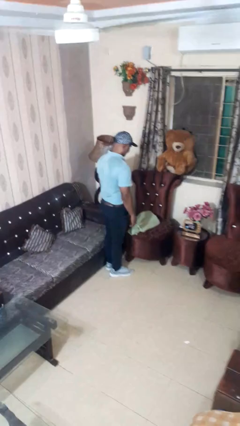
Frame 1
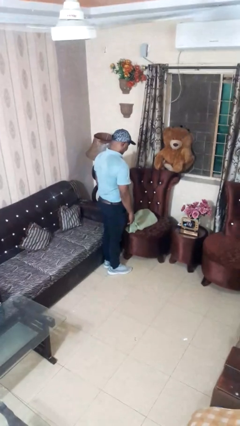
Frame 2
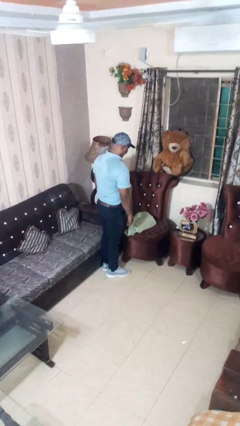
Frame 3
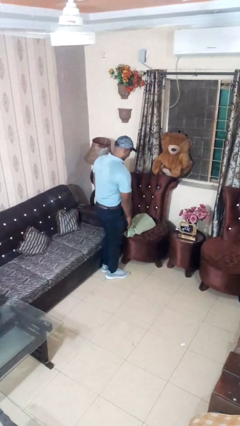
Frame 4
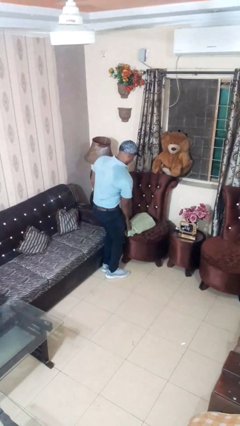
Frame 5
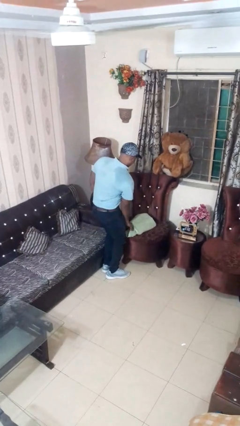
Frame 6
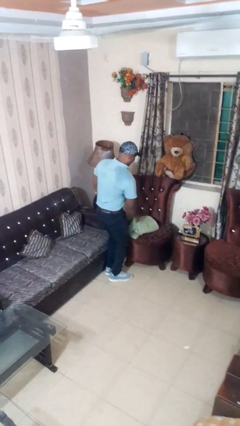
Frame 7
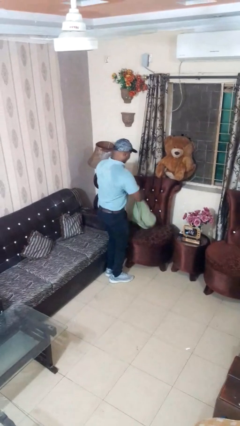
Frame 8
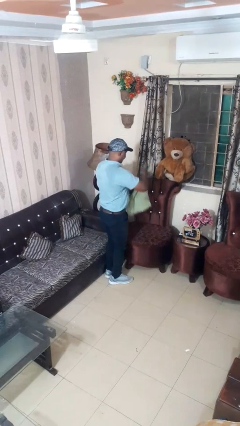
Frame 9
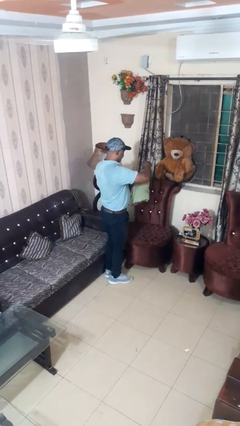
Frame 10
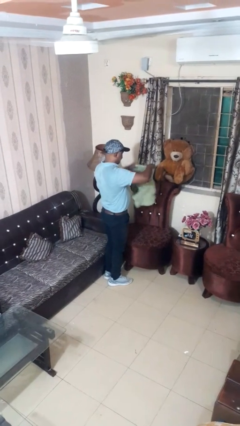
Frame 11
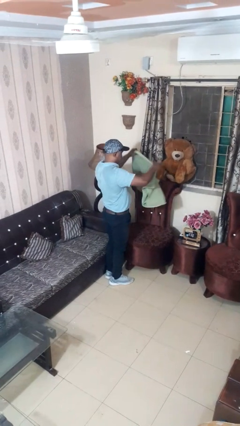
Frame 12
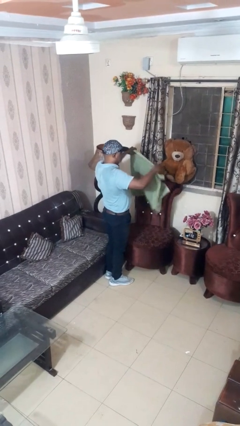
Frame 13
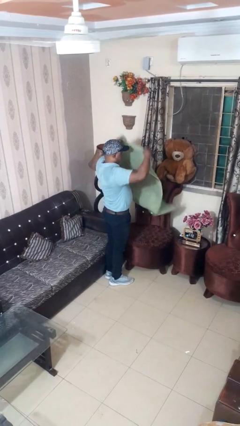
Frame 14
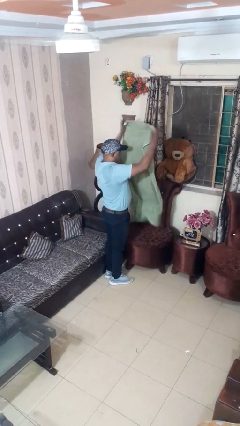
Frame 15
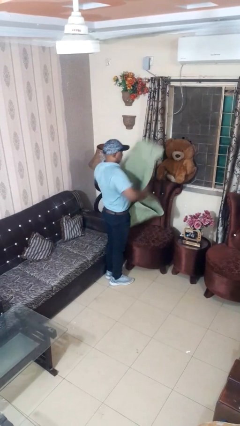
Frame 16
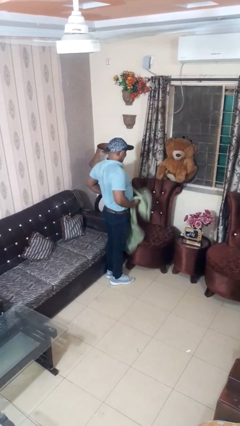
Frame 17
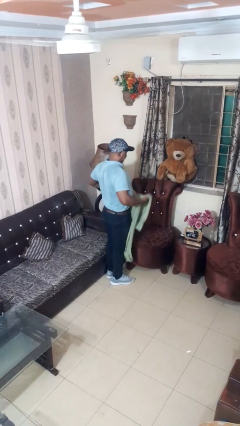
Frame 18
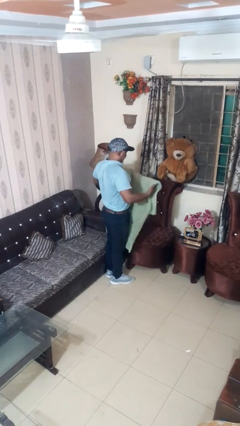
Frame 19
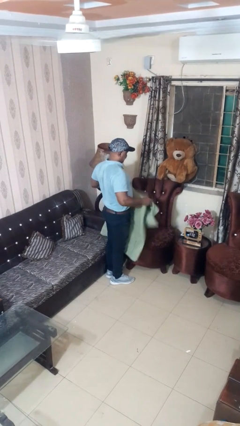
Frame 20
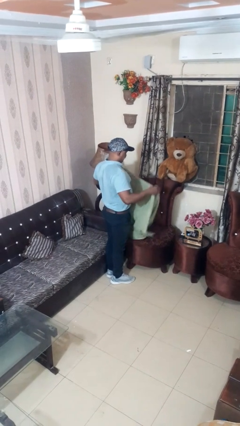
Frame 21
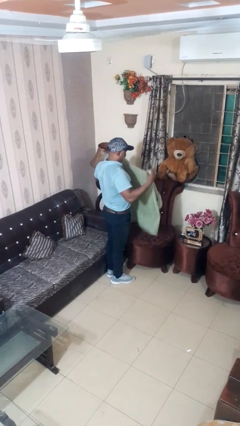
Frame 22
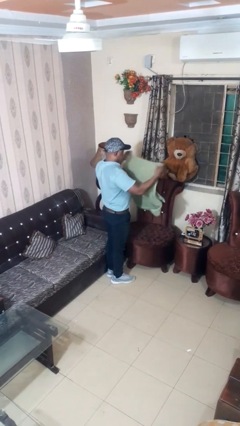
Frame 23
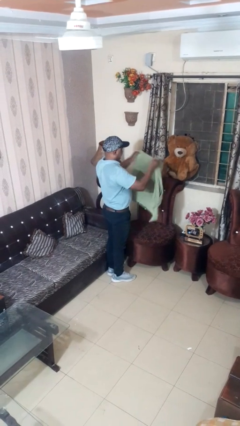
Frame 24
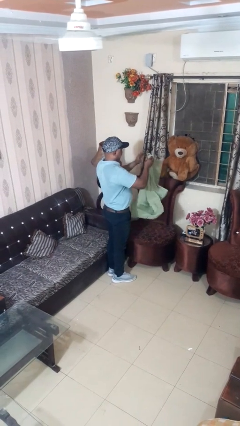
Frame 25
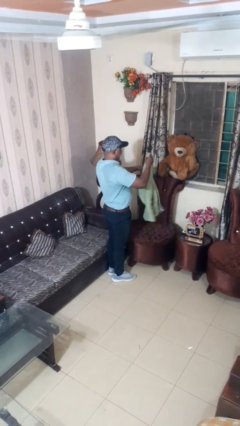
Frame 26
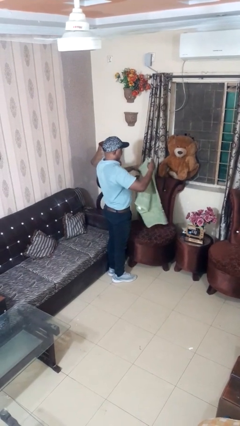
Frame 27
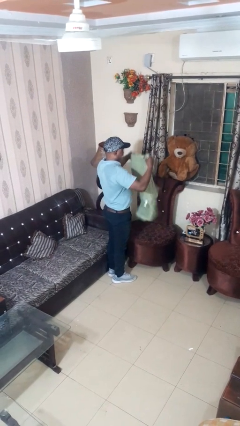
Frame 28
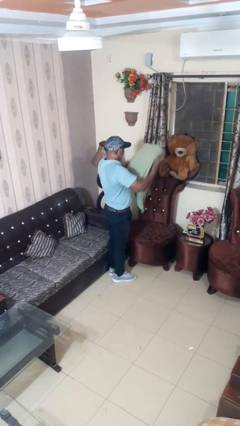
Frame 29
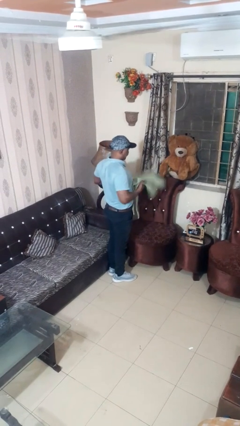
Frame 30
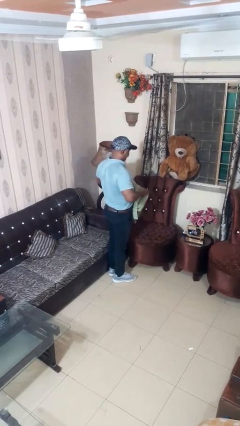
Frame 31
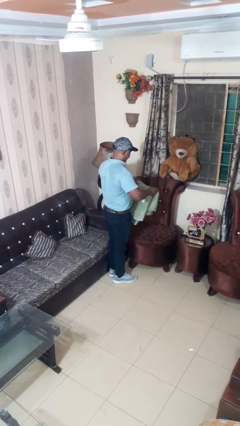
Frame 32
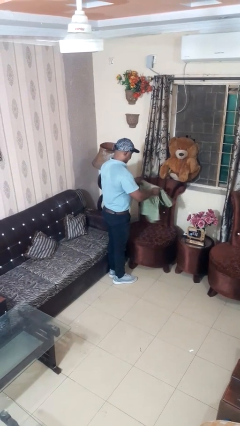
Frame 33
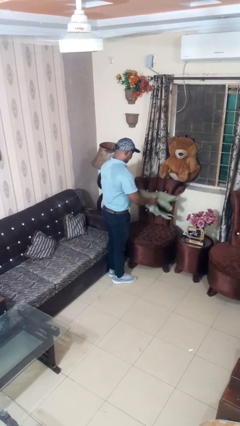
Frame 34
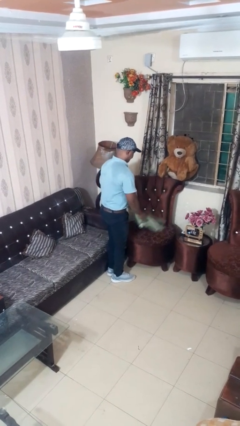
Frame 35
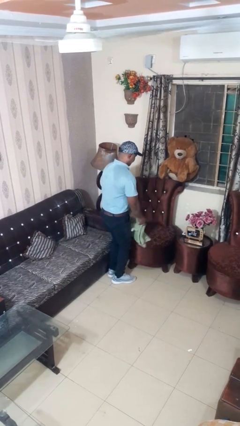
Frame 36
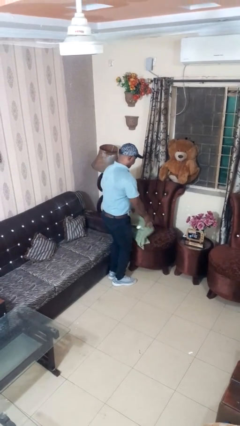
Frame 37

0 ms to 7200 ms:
person folds towel

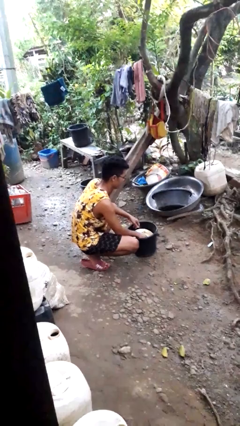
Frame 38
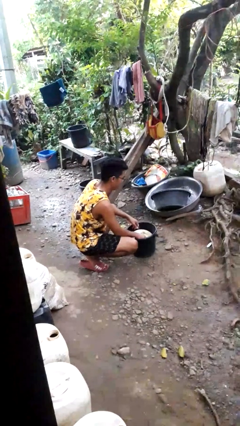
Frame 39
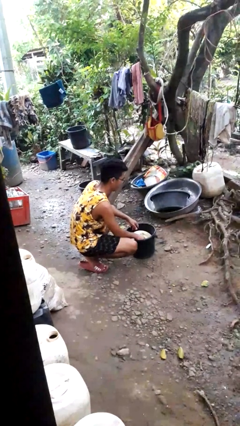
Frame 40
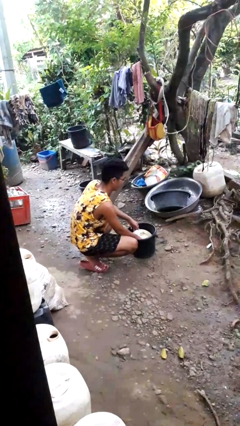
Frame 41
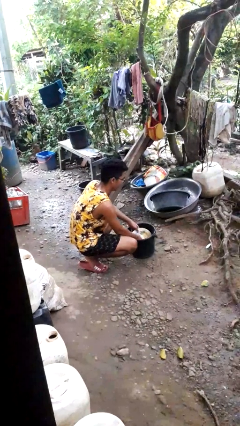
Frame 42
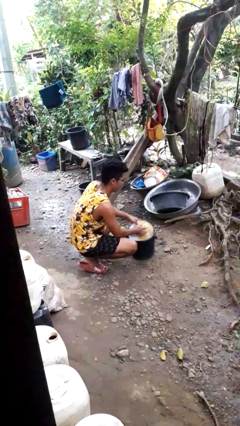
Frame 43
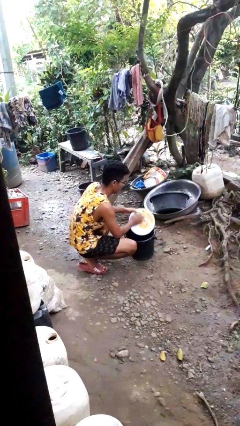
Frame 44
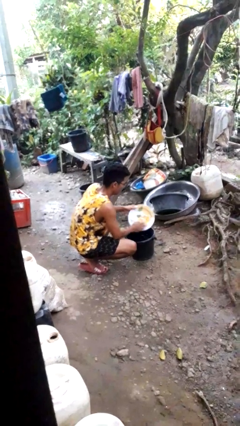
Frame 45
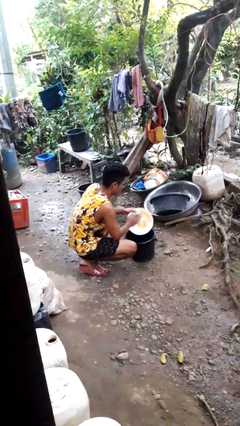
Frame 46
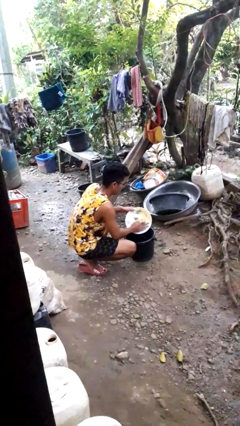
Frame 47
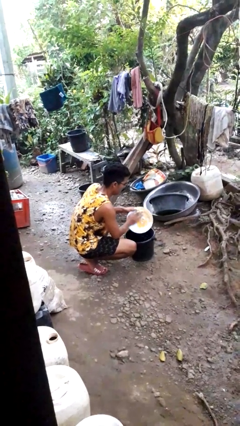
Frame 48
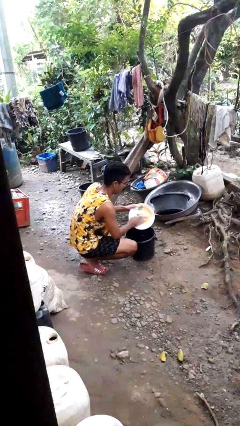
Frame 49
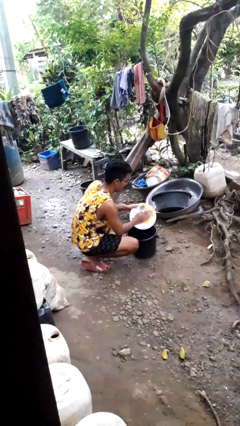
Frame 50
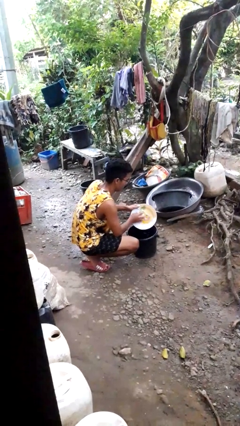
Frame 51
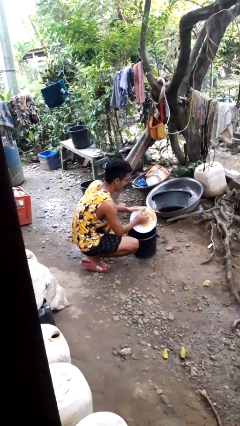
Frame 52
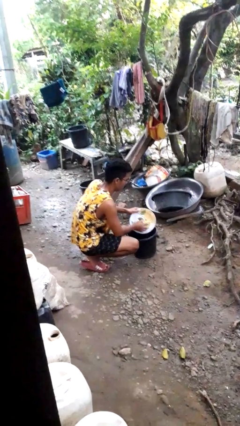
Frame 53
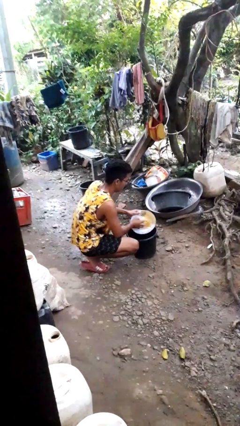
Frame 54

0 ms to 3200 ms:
person washes dish

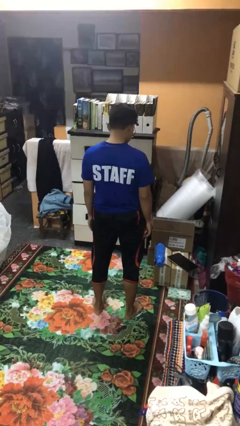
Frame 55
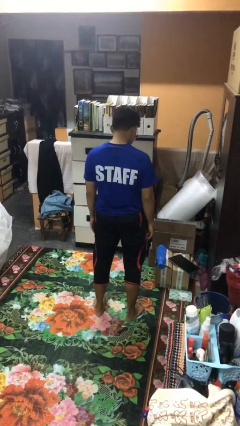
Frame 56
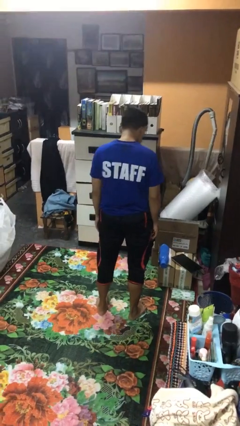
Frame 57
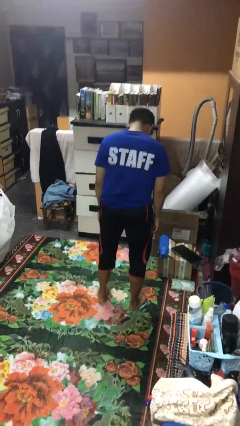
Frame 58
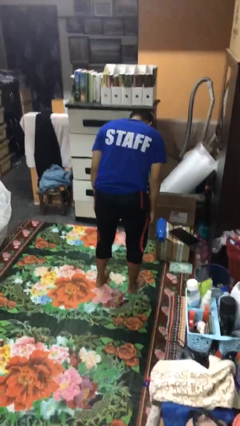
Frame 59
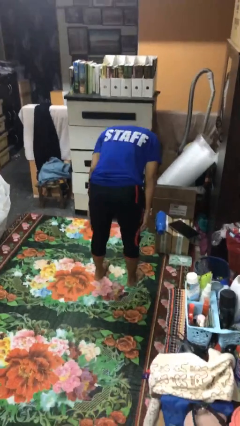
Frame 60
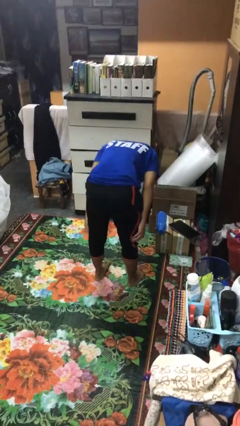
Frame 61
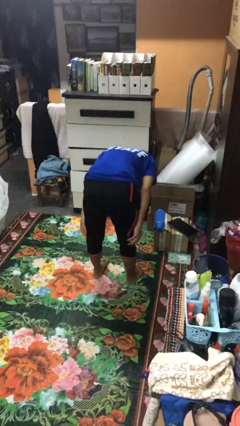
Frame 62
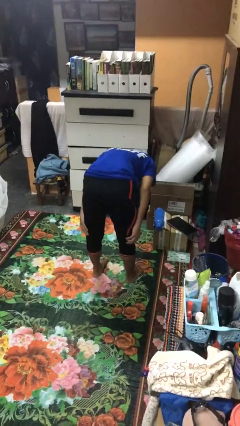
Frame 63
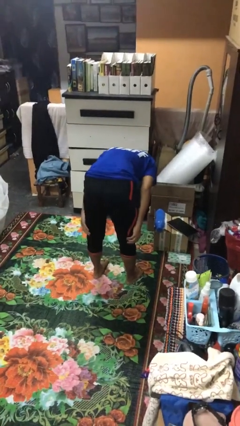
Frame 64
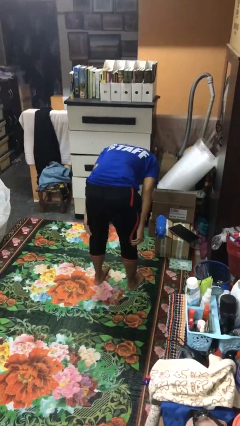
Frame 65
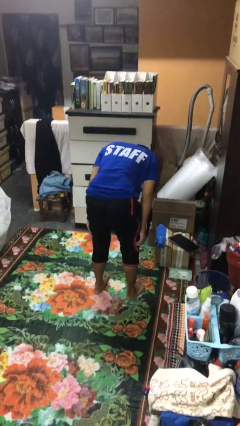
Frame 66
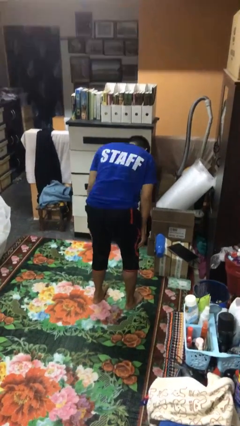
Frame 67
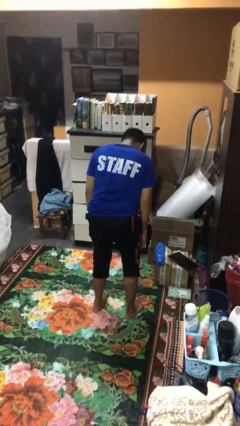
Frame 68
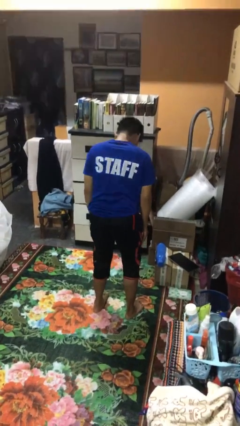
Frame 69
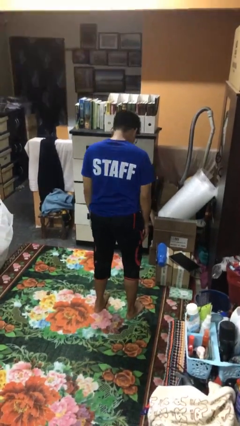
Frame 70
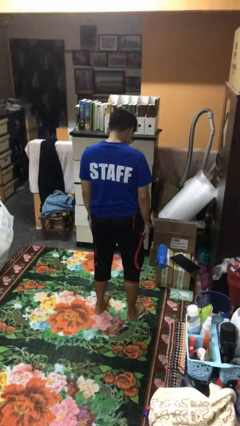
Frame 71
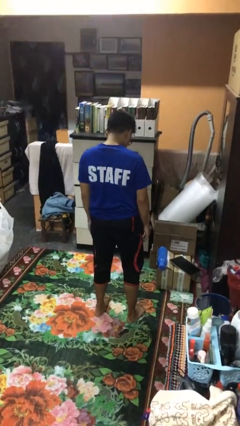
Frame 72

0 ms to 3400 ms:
person bows

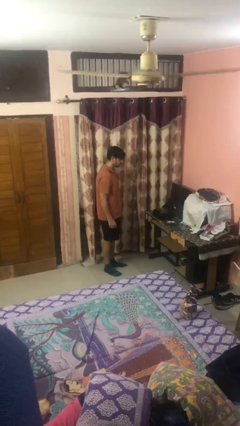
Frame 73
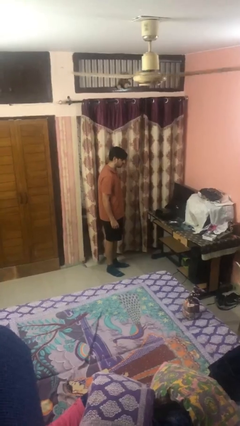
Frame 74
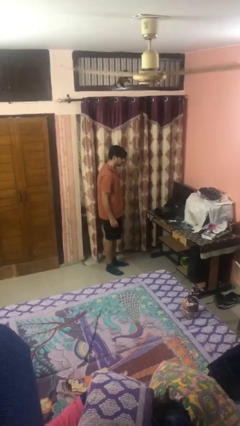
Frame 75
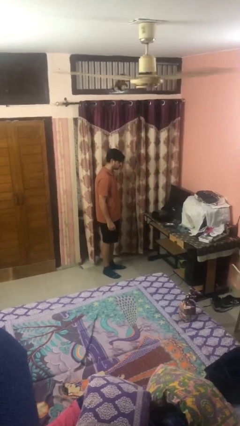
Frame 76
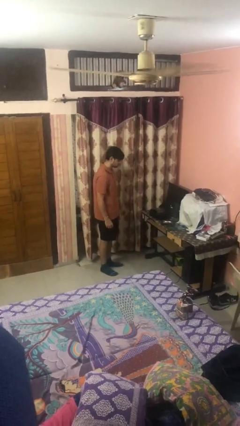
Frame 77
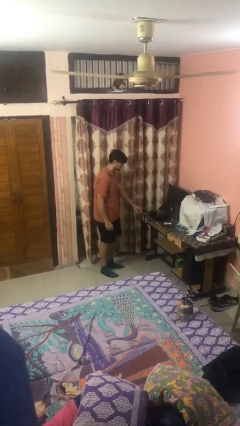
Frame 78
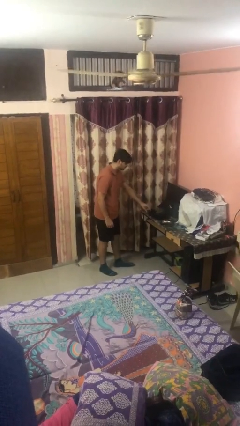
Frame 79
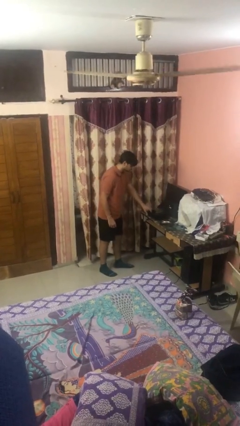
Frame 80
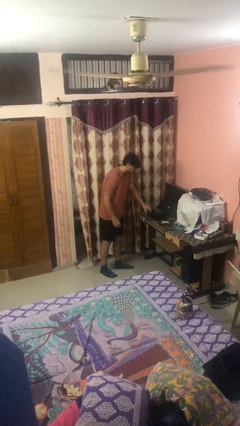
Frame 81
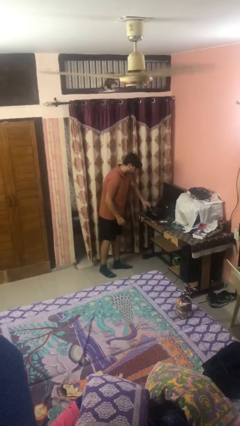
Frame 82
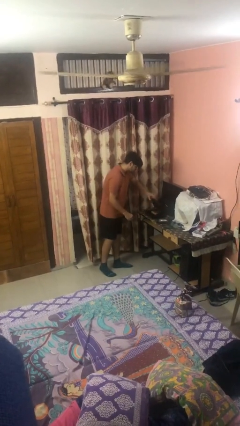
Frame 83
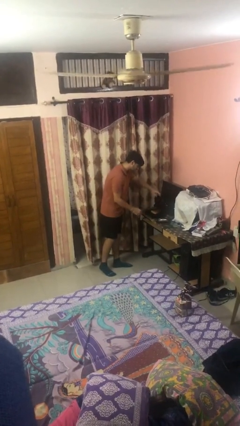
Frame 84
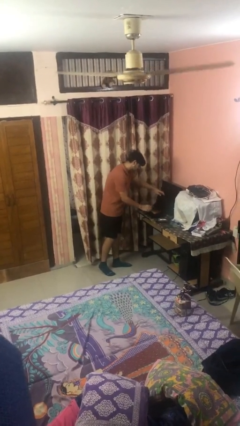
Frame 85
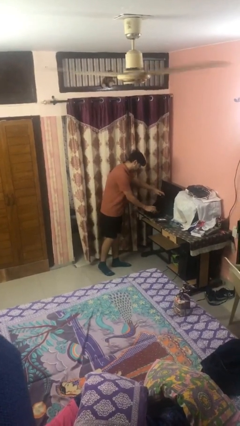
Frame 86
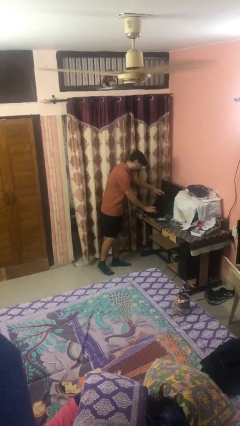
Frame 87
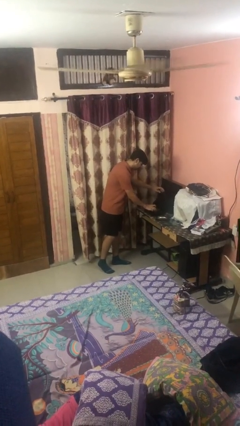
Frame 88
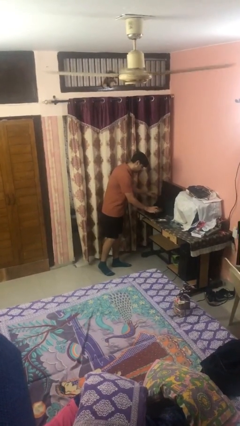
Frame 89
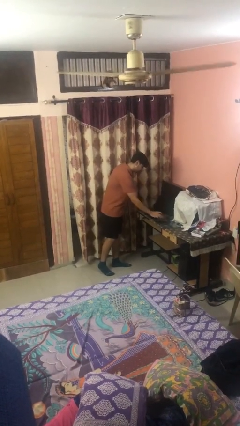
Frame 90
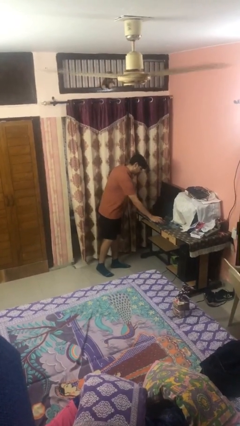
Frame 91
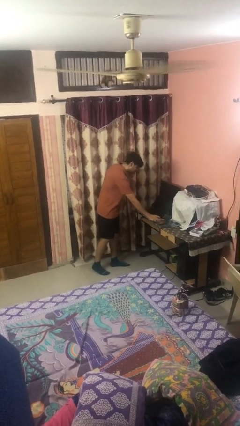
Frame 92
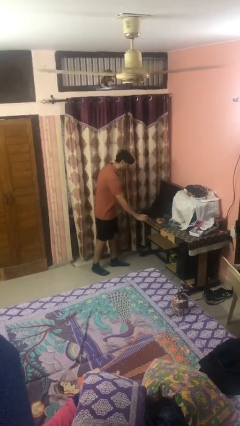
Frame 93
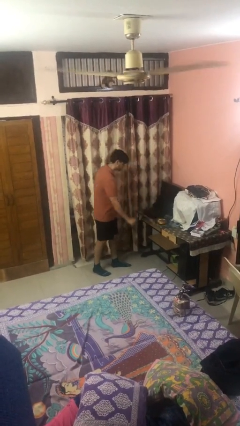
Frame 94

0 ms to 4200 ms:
person takes object from toaster
